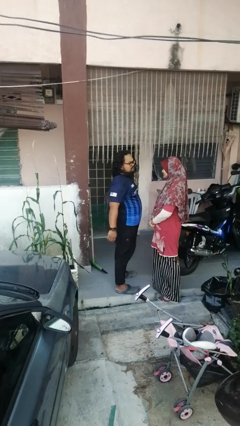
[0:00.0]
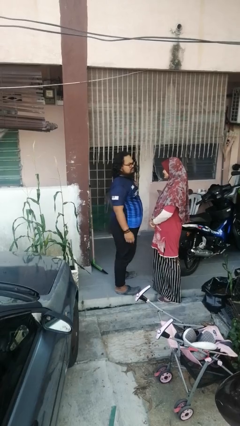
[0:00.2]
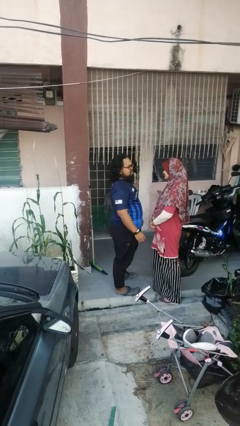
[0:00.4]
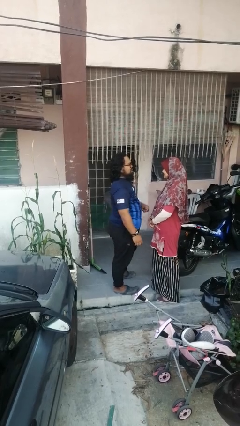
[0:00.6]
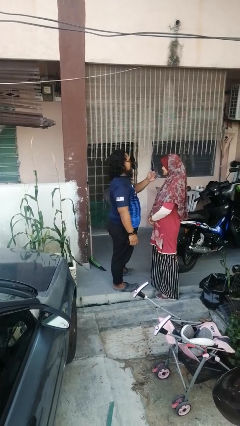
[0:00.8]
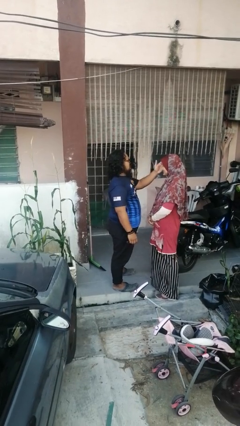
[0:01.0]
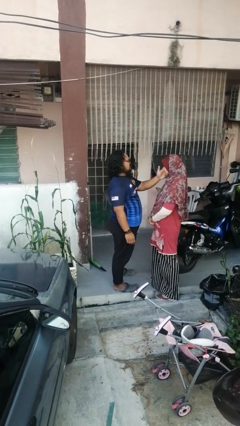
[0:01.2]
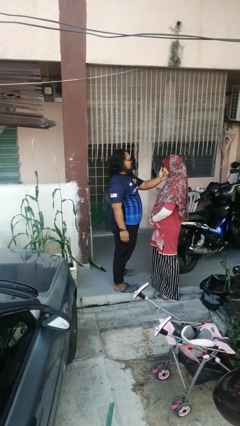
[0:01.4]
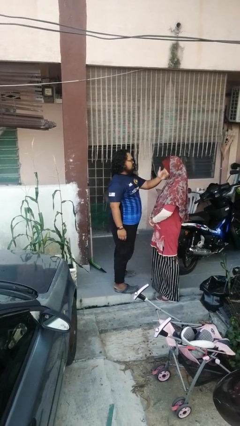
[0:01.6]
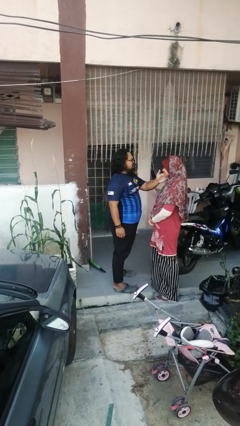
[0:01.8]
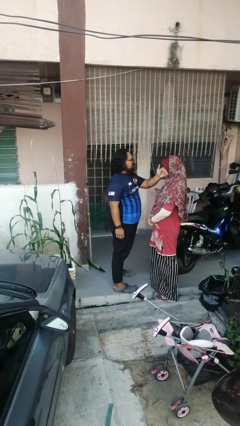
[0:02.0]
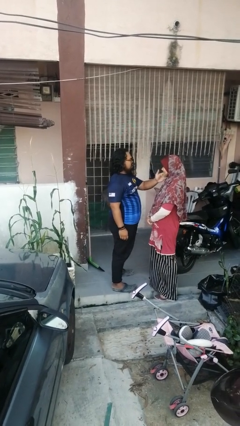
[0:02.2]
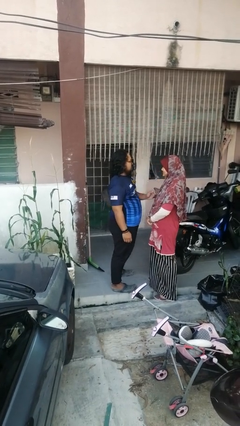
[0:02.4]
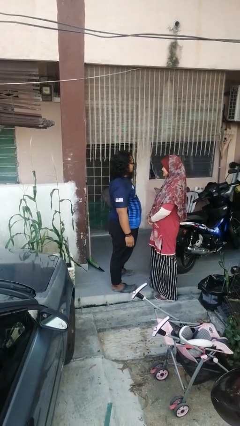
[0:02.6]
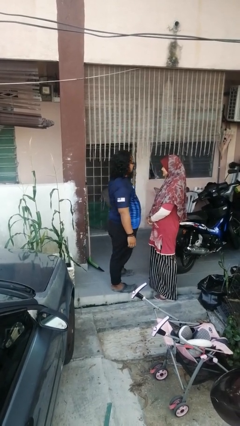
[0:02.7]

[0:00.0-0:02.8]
person touches face of person

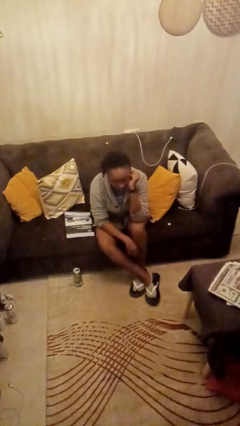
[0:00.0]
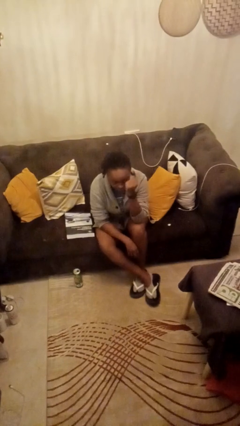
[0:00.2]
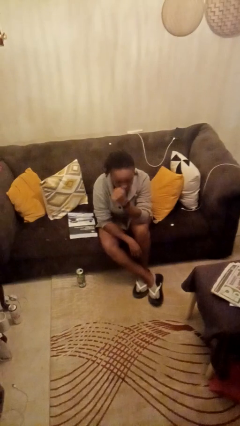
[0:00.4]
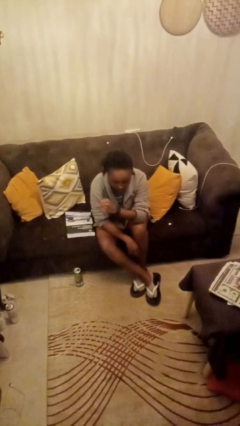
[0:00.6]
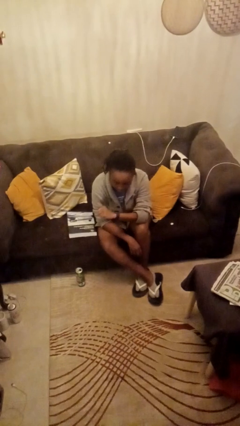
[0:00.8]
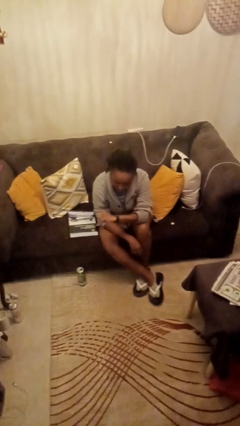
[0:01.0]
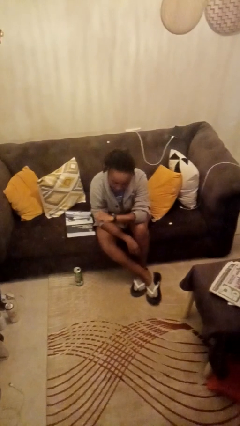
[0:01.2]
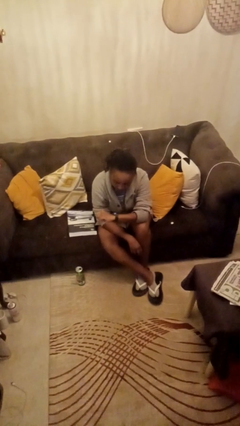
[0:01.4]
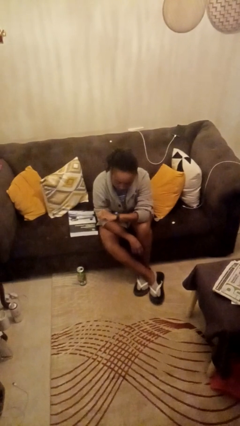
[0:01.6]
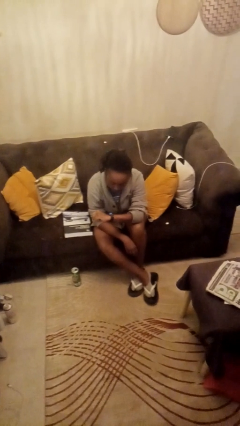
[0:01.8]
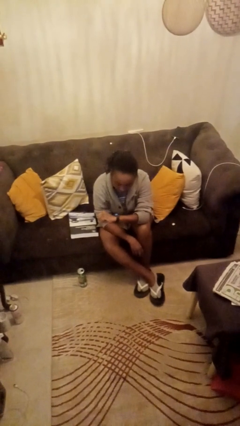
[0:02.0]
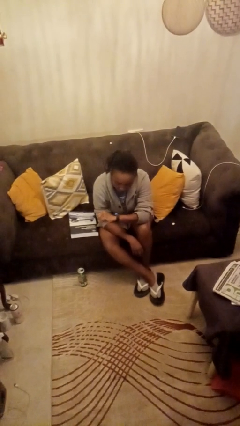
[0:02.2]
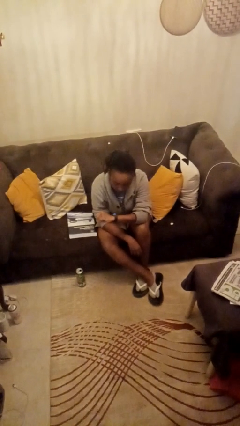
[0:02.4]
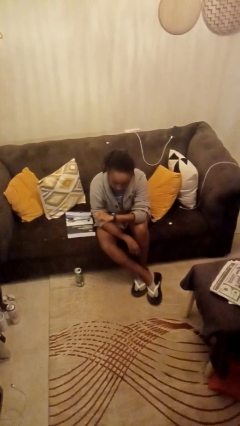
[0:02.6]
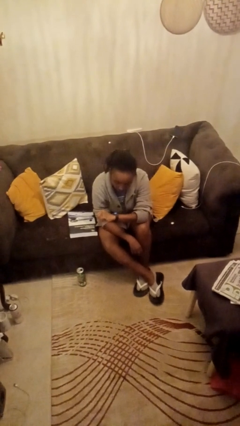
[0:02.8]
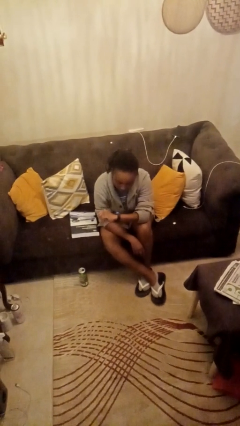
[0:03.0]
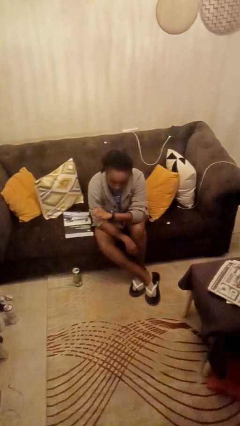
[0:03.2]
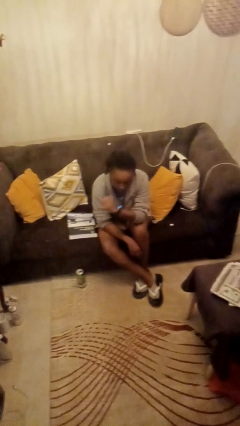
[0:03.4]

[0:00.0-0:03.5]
person looks at wristwatch

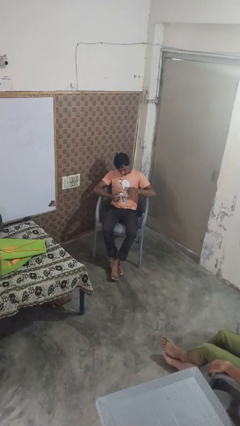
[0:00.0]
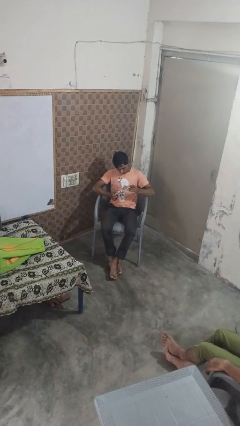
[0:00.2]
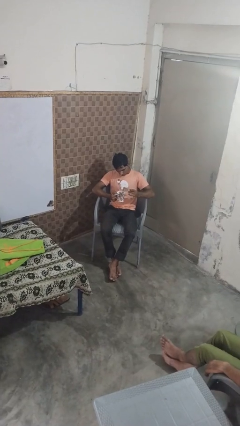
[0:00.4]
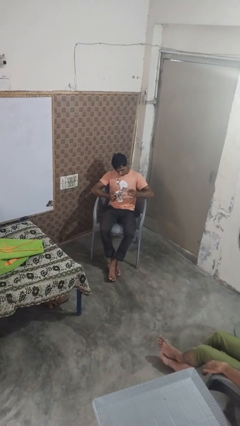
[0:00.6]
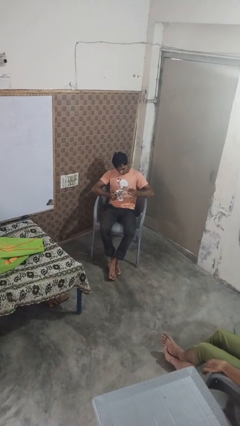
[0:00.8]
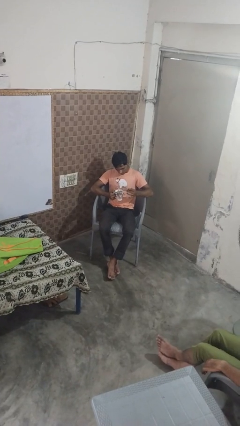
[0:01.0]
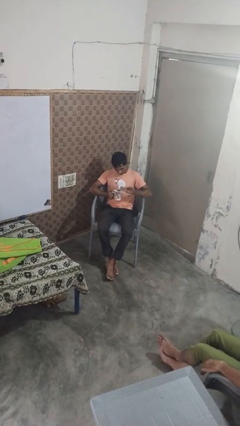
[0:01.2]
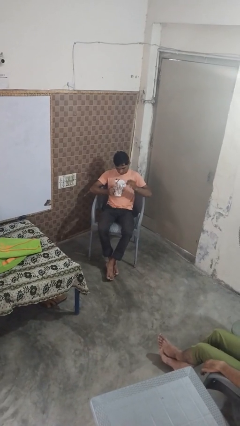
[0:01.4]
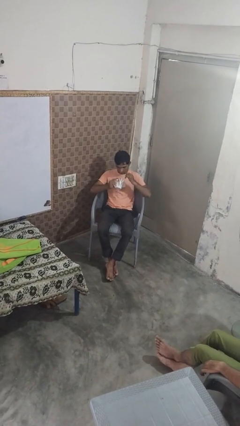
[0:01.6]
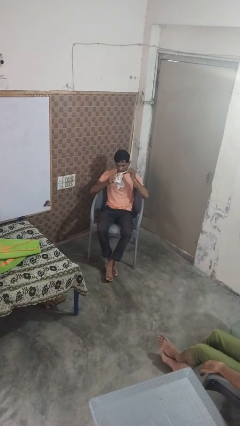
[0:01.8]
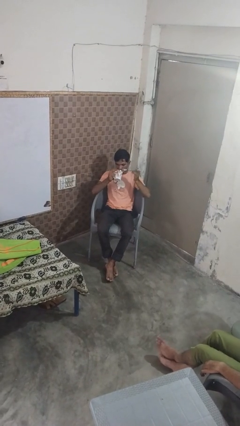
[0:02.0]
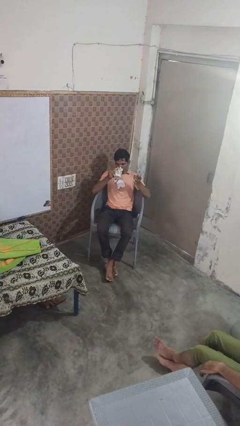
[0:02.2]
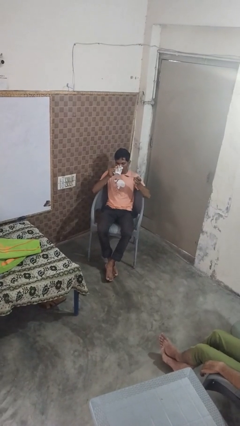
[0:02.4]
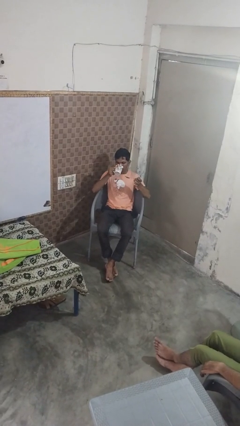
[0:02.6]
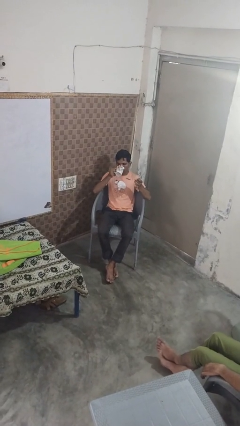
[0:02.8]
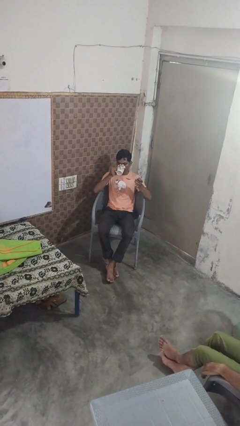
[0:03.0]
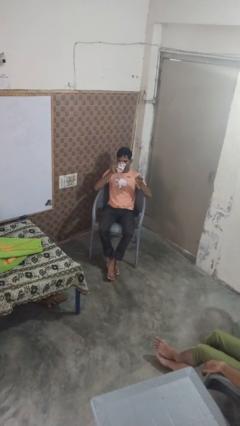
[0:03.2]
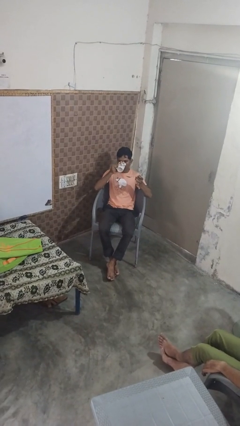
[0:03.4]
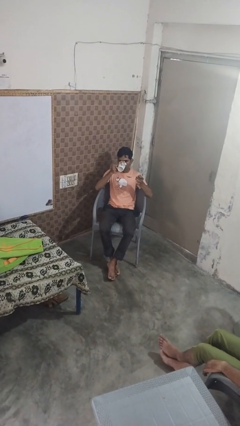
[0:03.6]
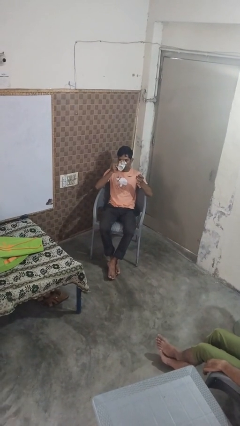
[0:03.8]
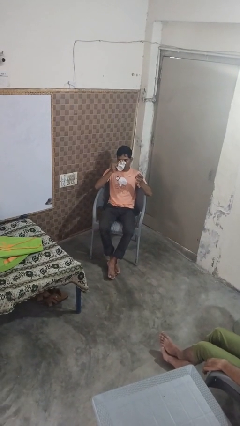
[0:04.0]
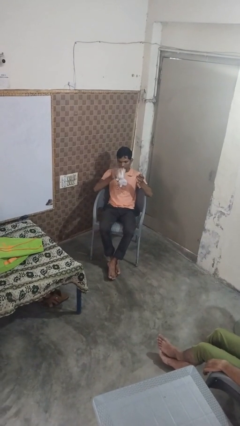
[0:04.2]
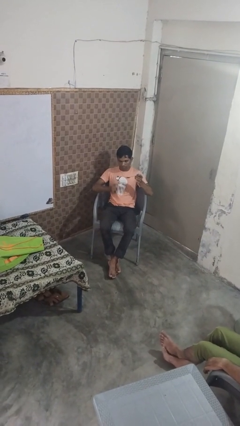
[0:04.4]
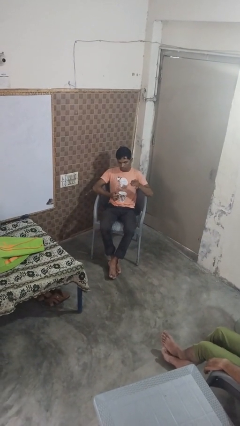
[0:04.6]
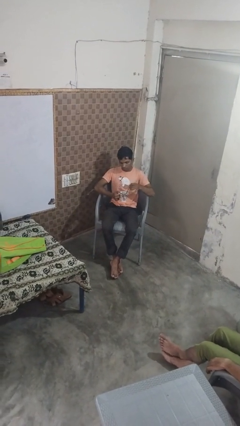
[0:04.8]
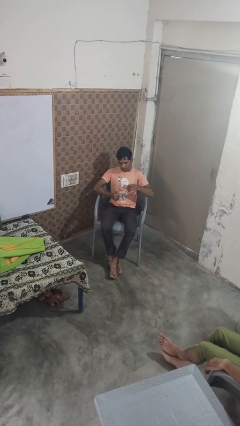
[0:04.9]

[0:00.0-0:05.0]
person drinks from mug

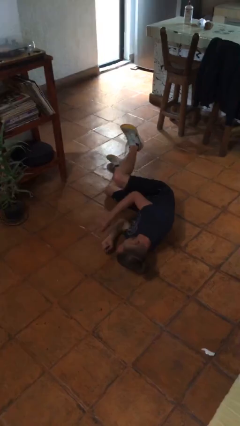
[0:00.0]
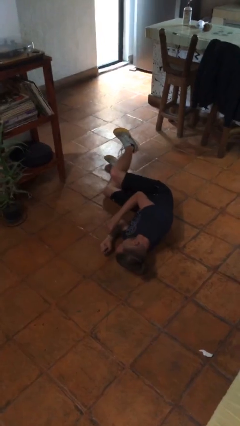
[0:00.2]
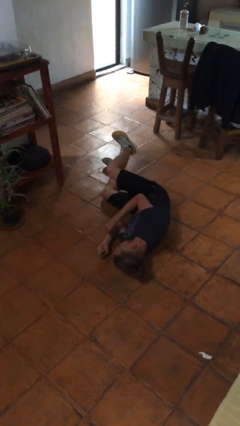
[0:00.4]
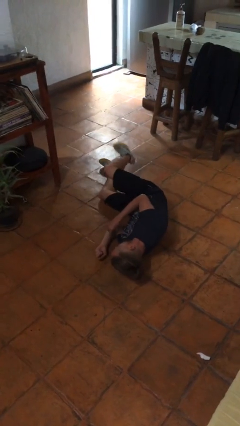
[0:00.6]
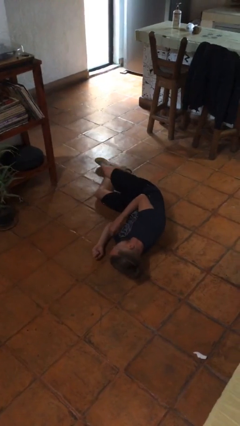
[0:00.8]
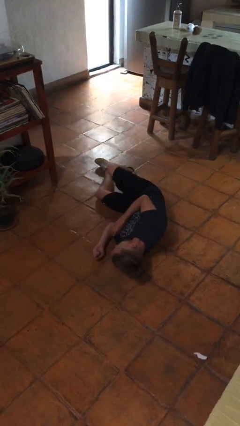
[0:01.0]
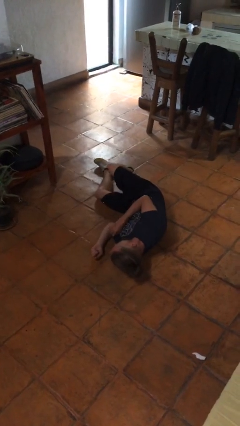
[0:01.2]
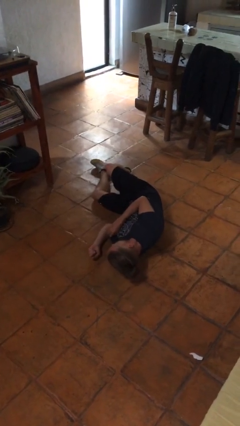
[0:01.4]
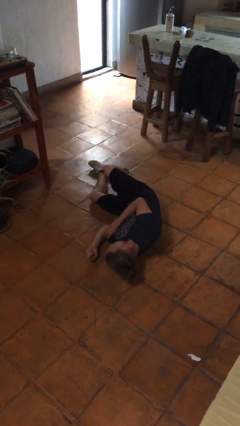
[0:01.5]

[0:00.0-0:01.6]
person lies down on floor

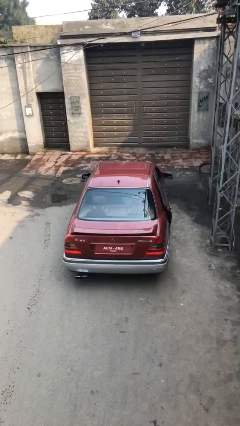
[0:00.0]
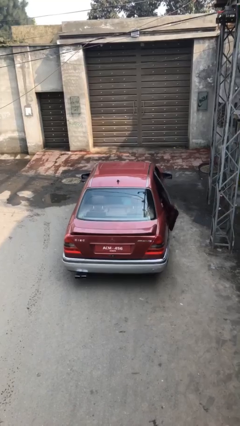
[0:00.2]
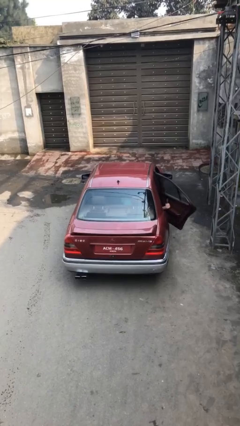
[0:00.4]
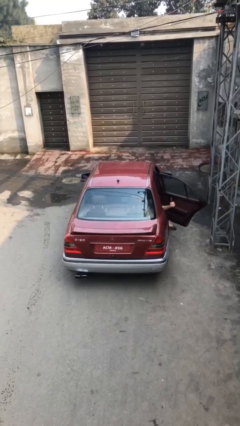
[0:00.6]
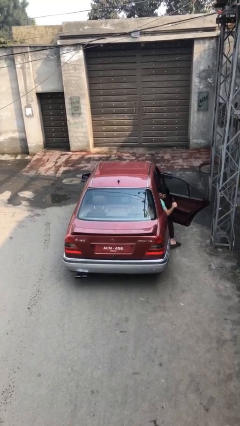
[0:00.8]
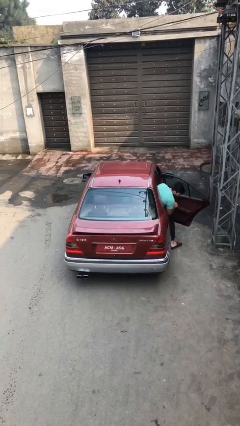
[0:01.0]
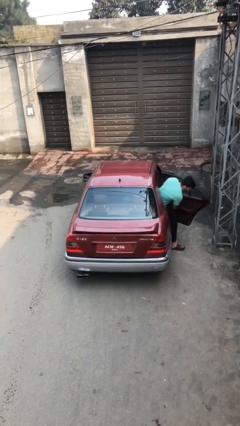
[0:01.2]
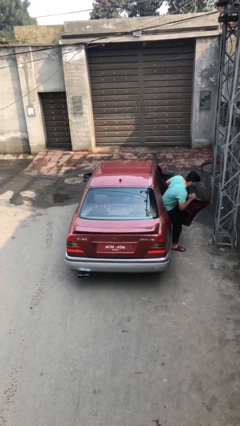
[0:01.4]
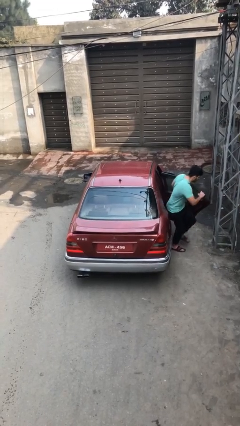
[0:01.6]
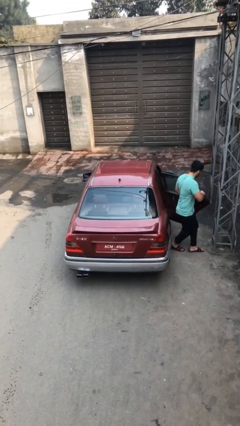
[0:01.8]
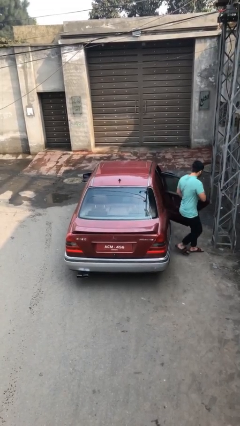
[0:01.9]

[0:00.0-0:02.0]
car drops off person

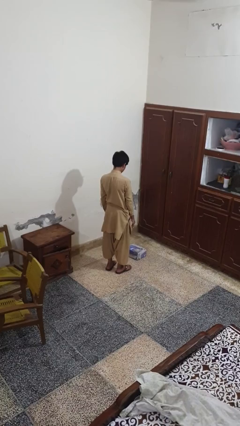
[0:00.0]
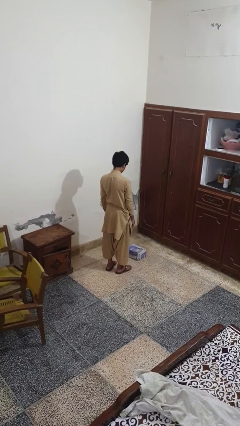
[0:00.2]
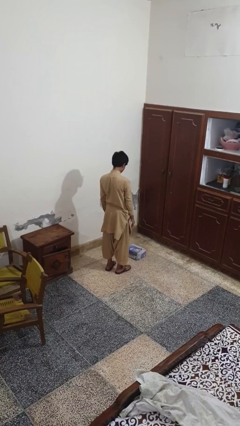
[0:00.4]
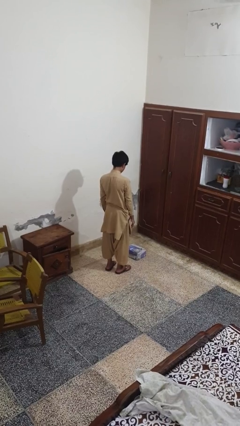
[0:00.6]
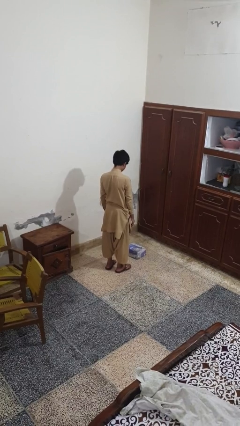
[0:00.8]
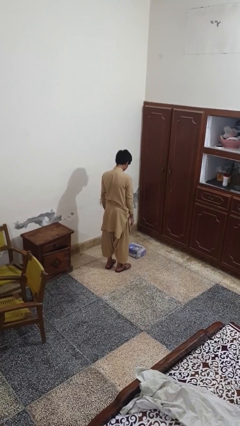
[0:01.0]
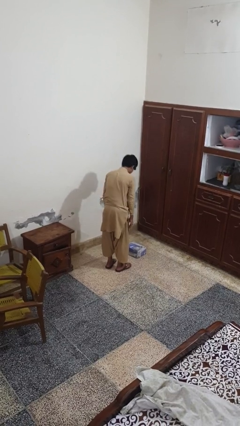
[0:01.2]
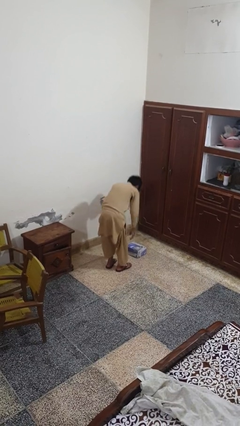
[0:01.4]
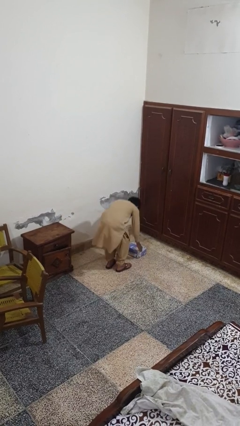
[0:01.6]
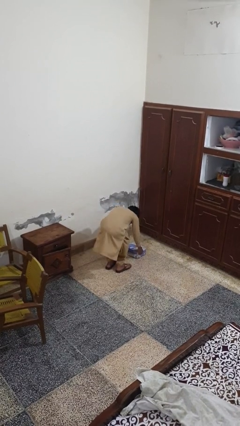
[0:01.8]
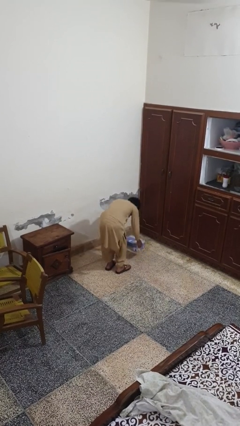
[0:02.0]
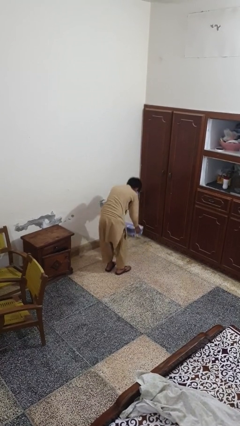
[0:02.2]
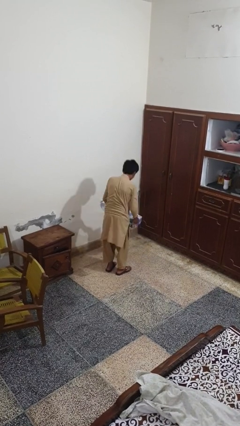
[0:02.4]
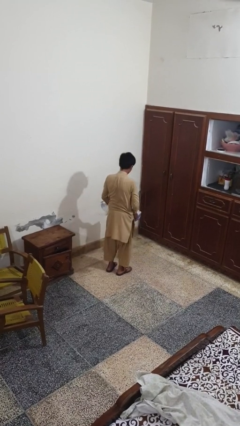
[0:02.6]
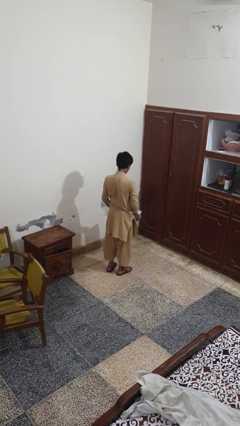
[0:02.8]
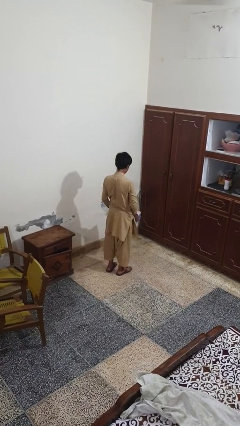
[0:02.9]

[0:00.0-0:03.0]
person picks up object from floor
